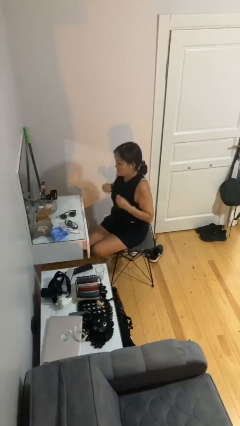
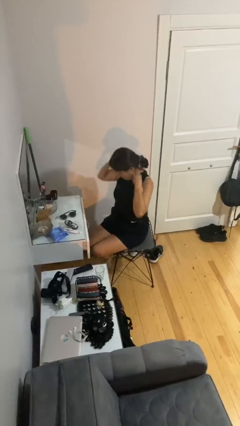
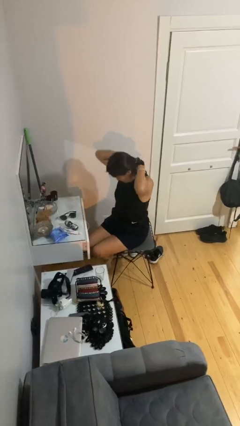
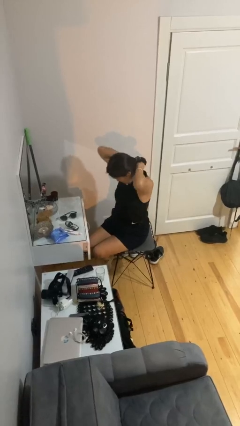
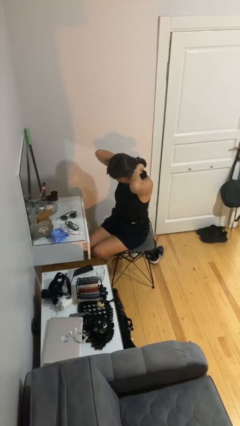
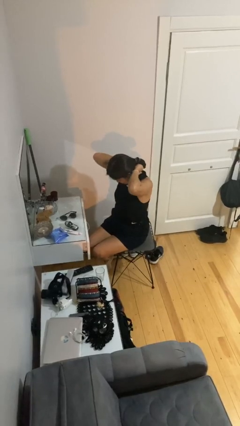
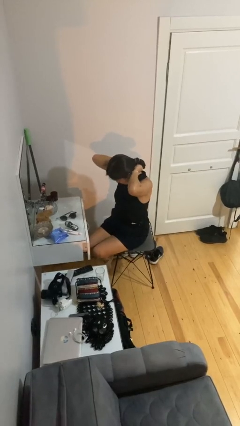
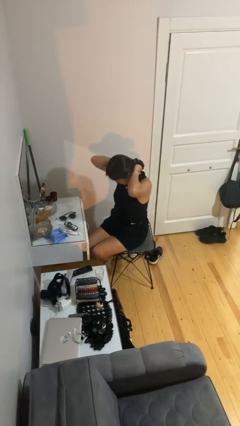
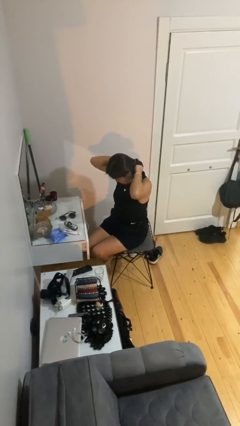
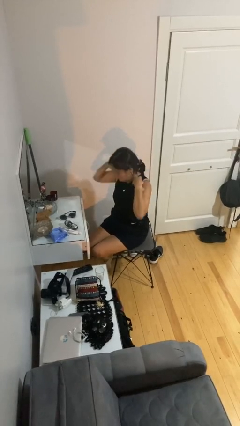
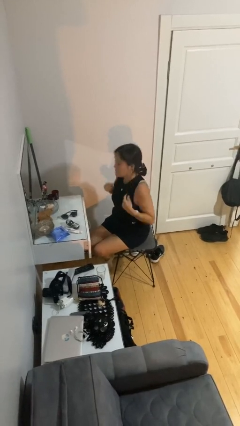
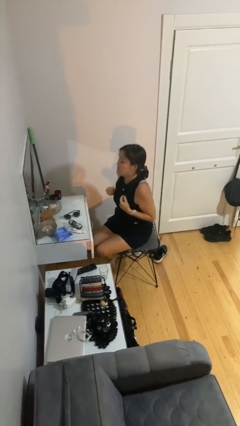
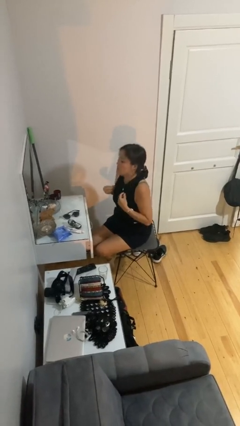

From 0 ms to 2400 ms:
person puts on necklace

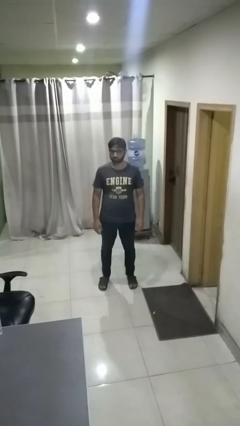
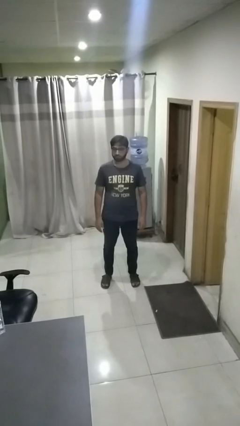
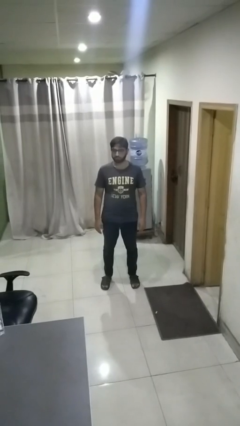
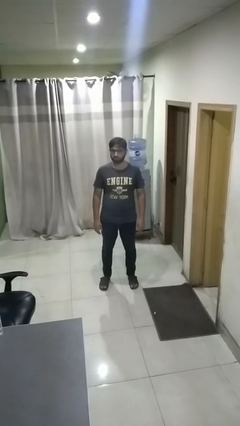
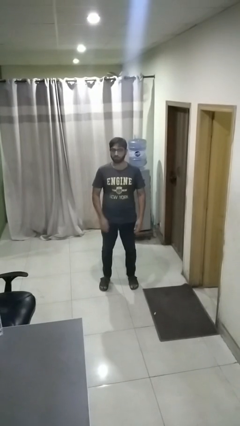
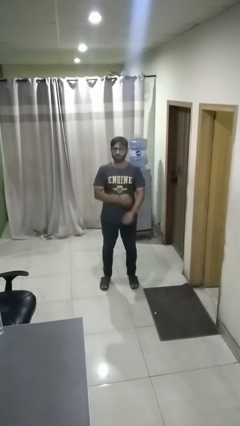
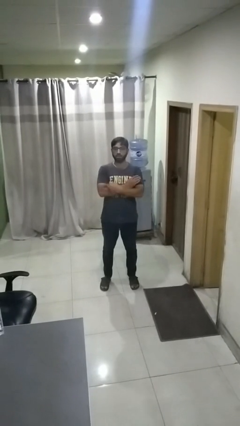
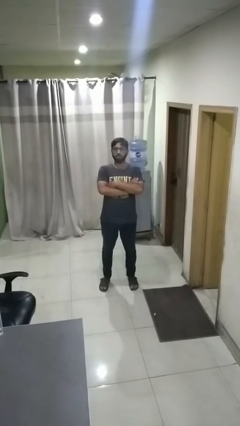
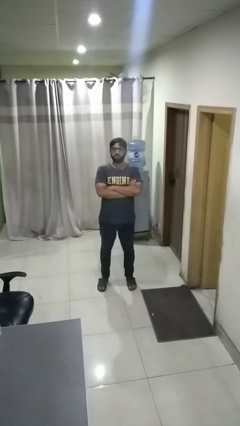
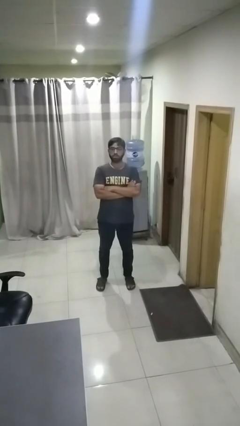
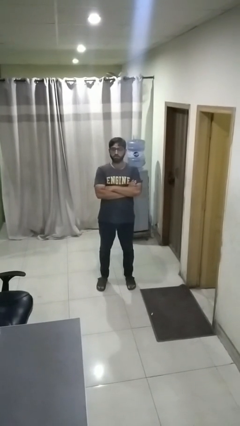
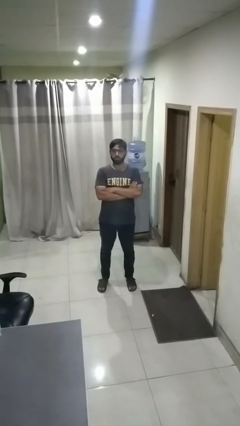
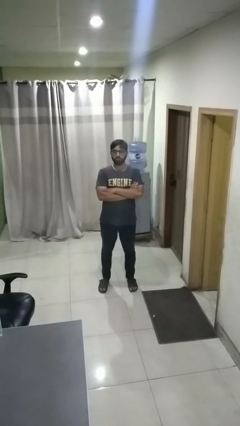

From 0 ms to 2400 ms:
person crosses arms

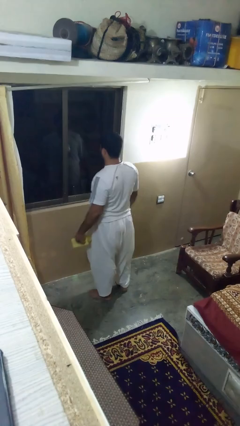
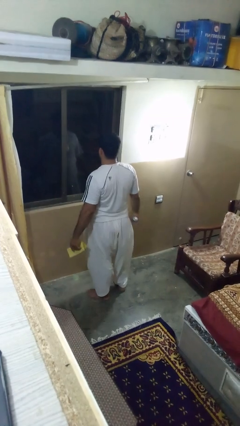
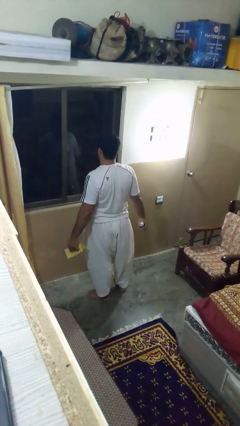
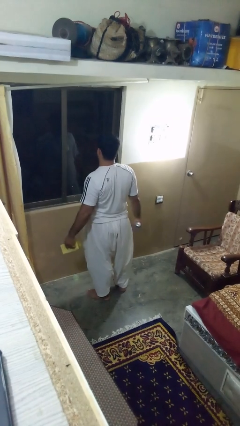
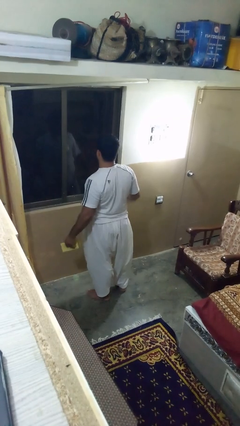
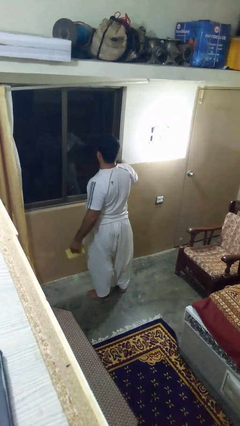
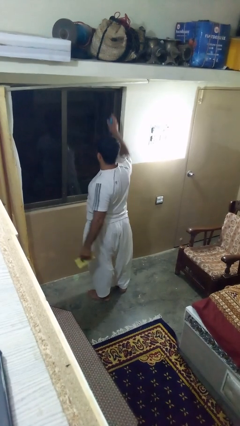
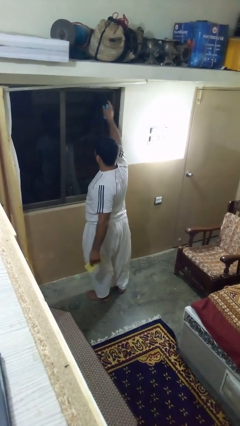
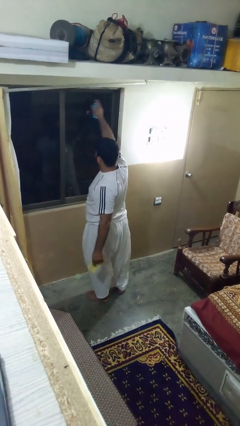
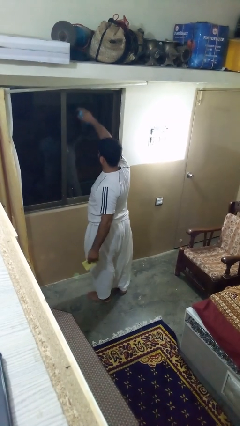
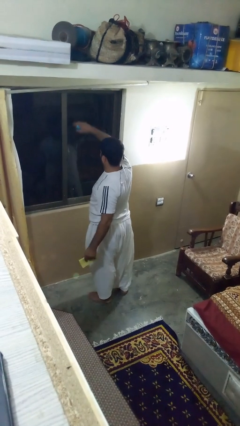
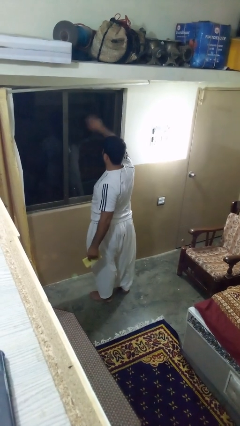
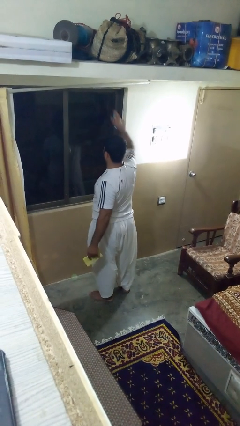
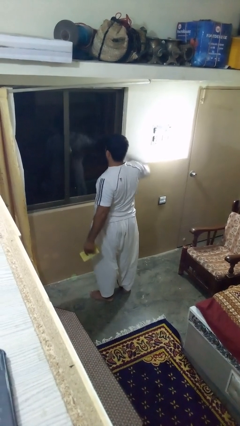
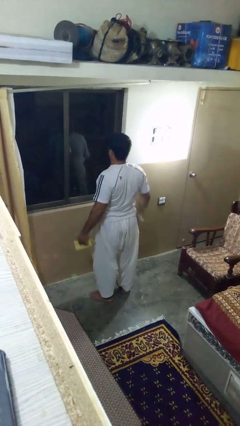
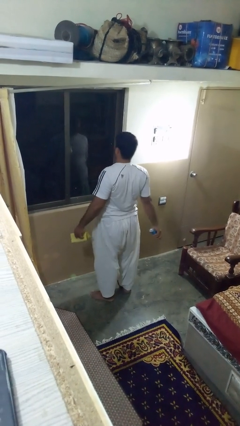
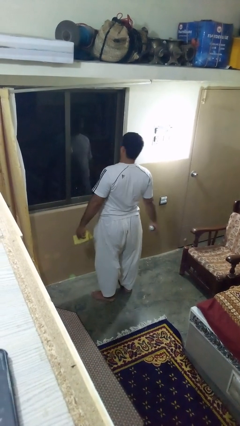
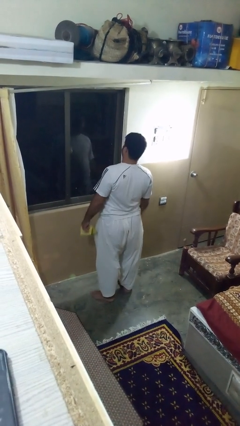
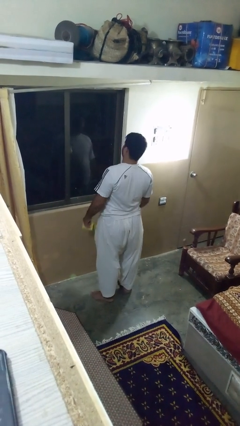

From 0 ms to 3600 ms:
person sprays from bottle

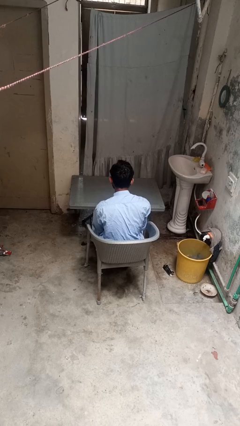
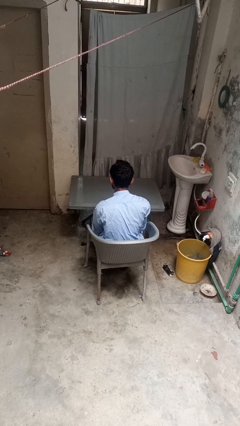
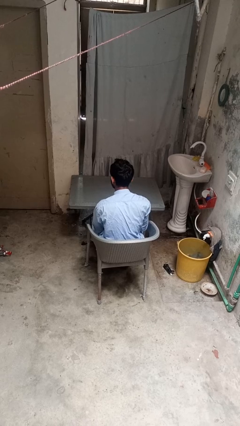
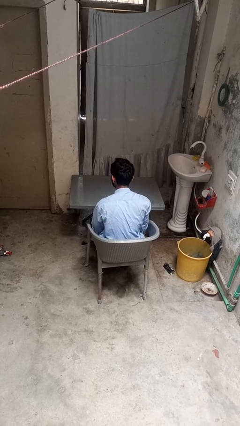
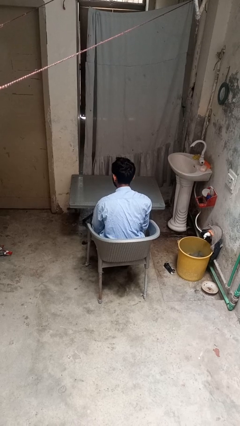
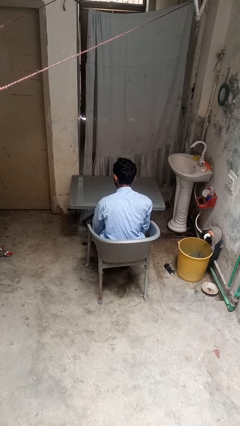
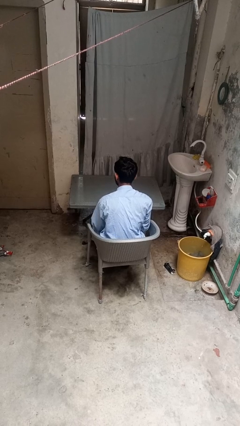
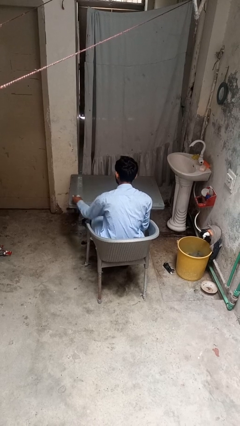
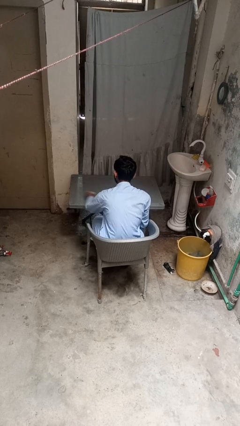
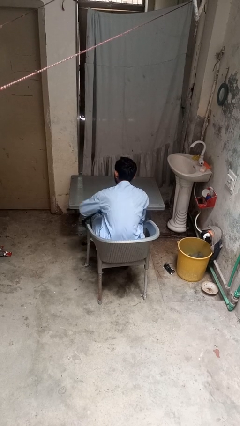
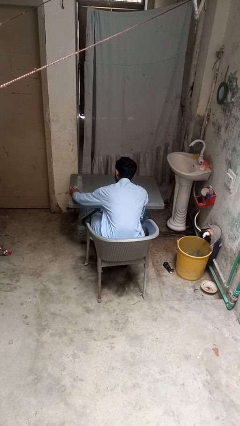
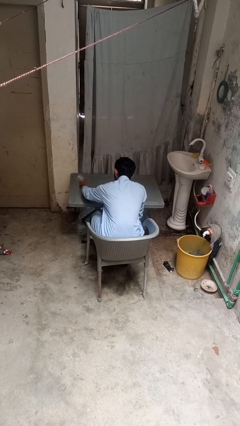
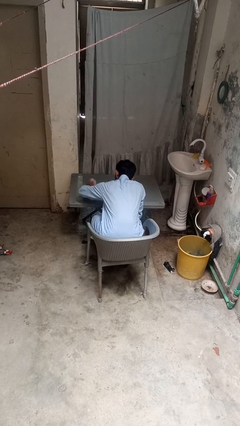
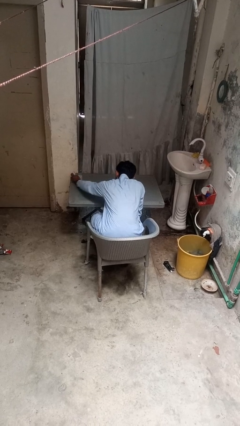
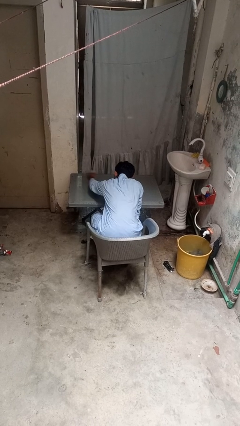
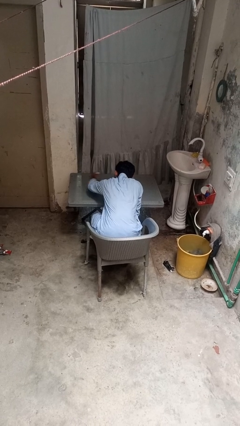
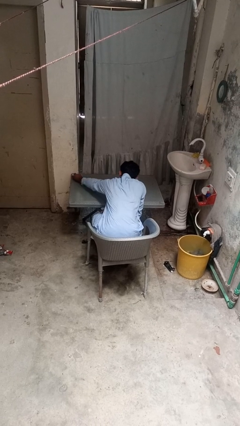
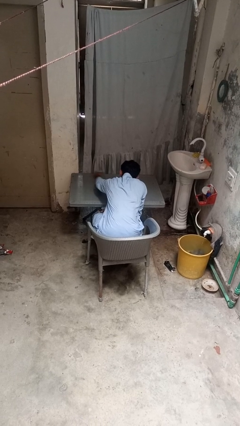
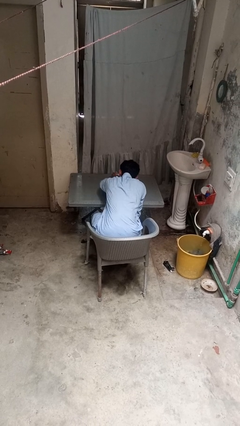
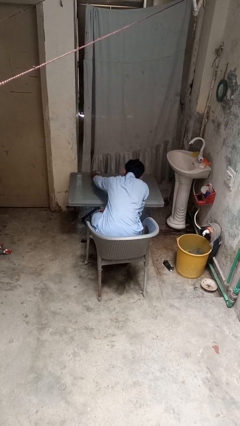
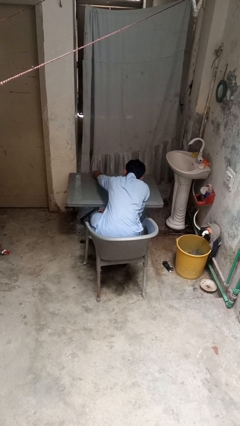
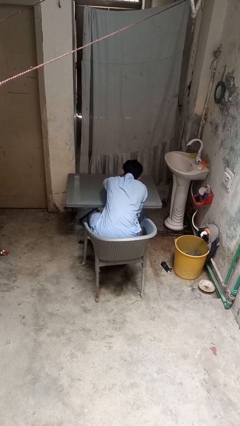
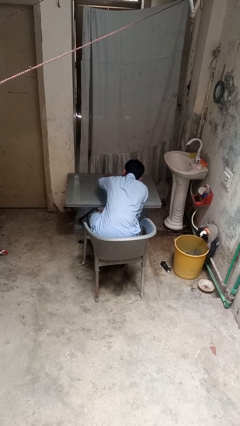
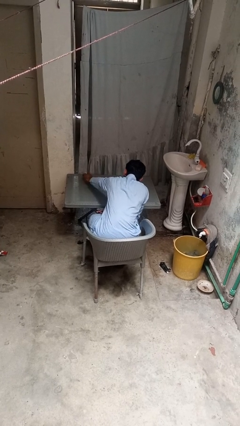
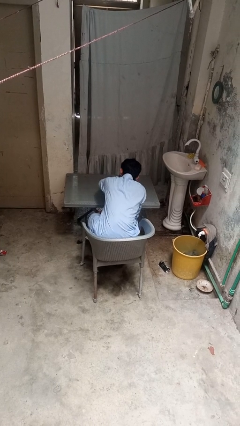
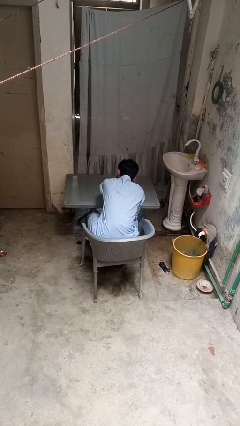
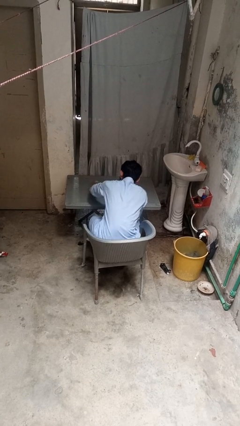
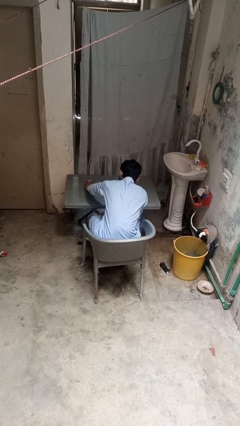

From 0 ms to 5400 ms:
person cleans table with rag

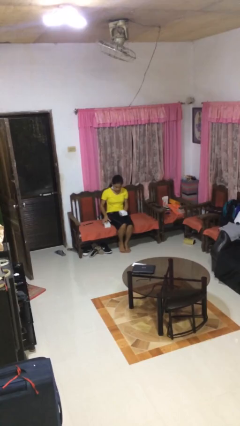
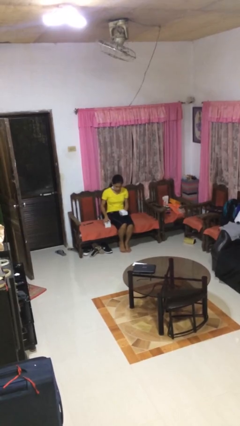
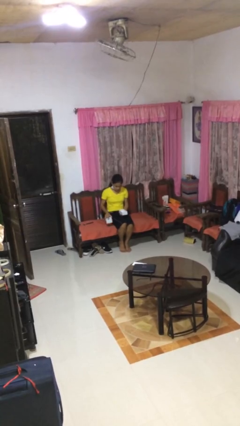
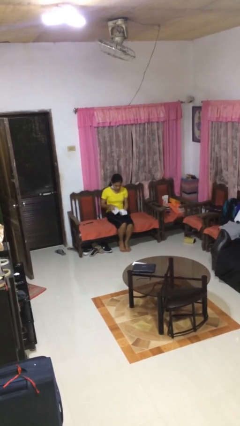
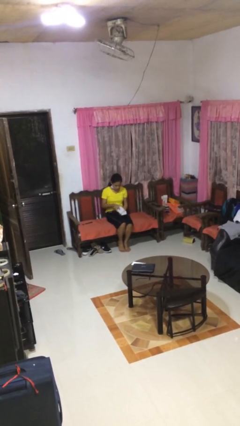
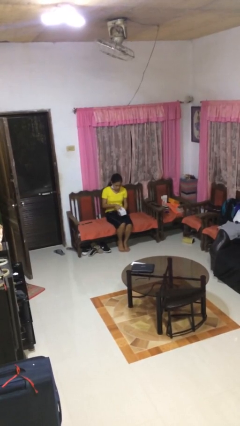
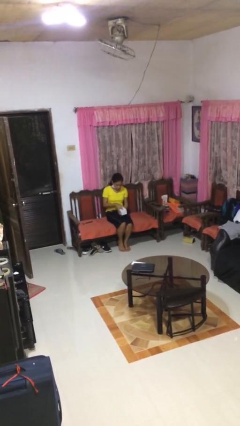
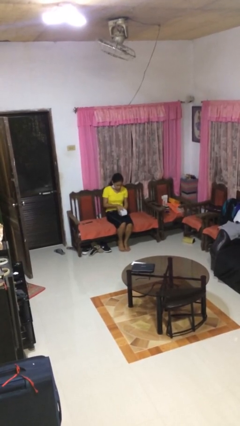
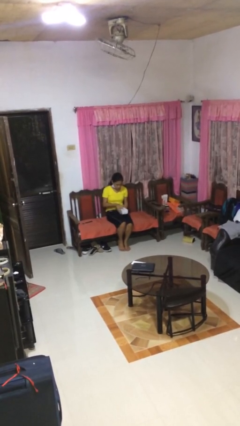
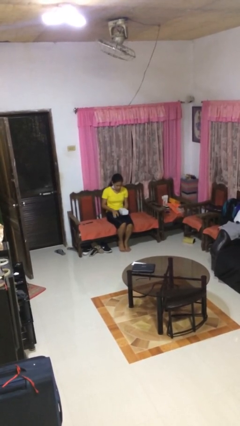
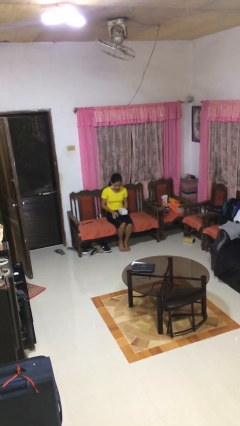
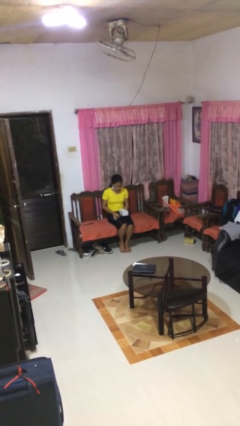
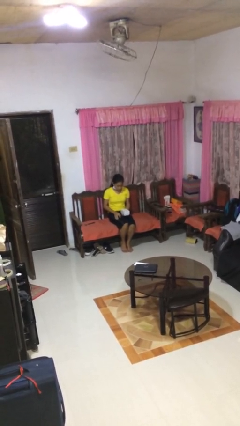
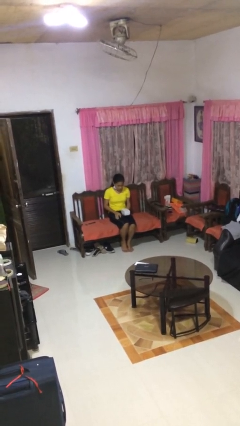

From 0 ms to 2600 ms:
person closes jewelry box

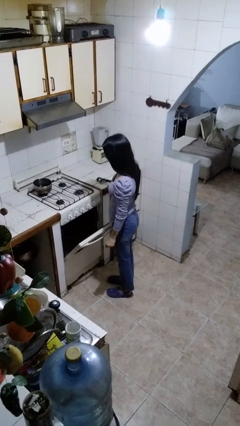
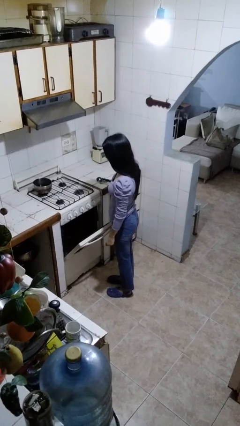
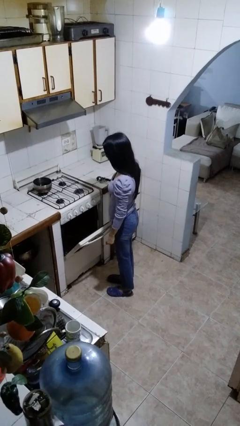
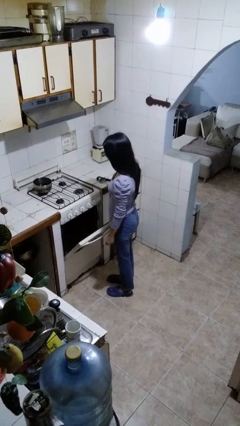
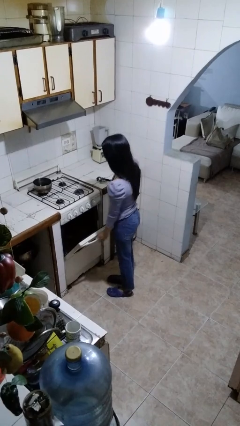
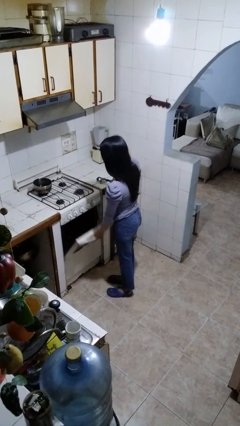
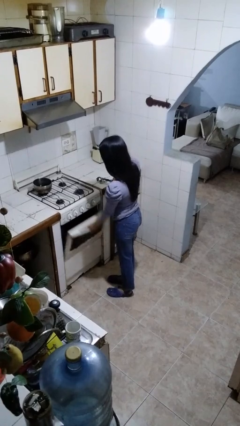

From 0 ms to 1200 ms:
person closes oven door
